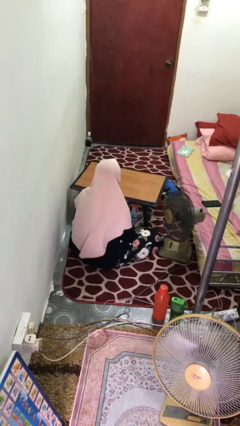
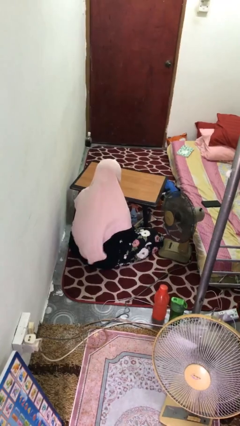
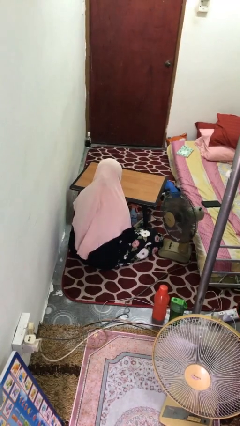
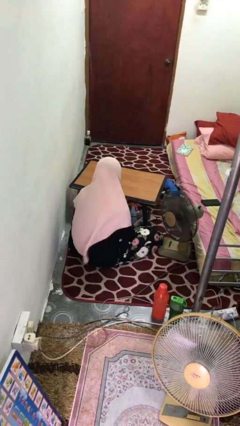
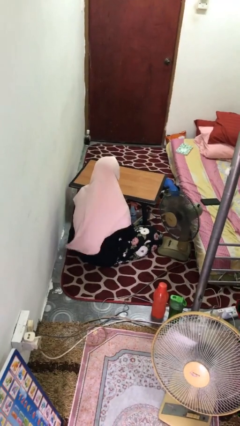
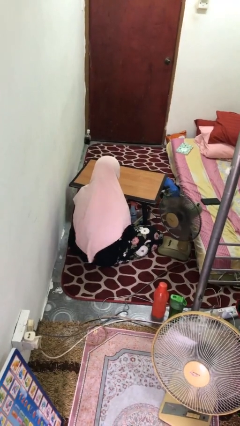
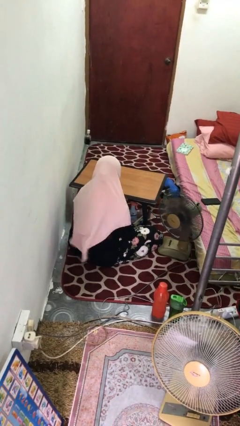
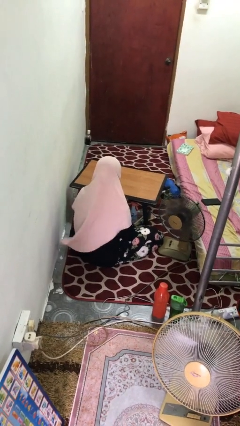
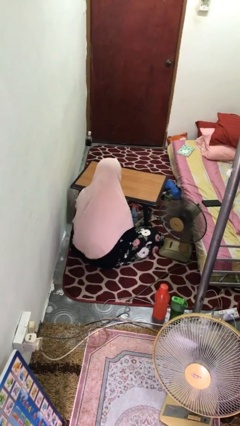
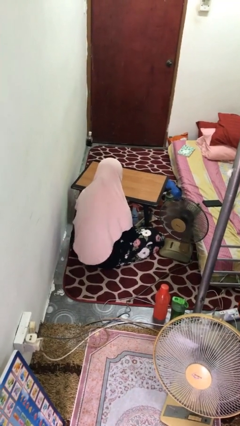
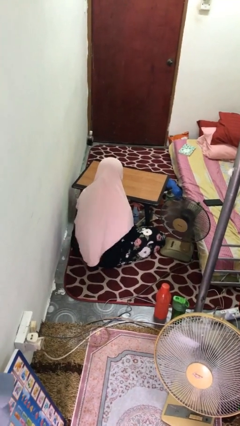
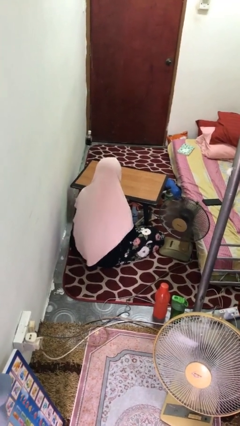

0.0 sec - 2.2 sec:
person nods head

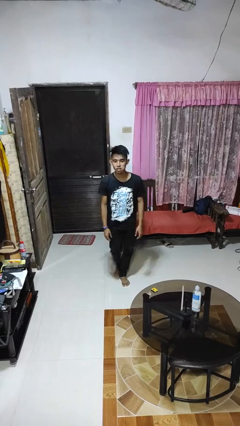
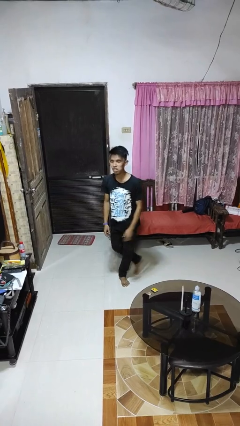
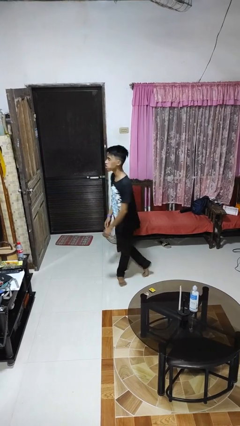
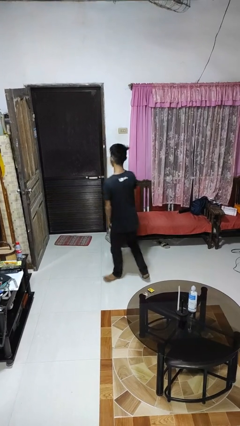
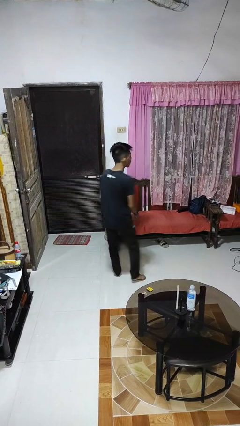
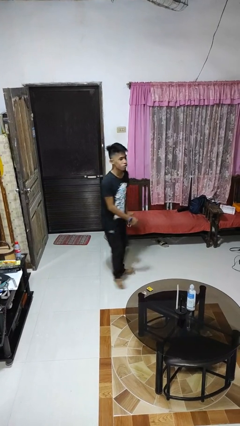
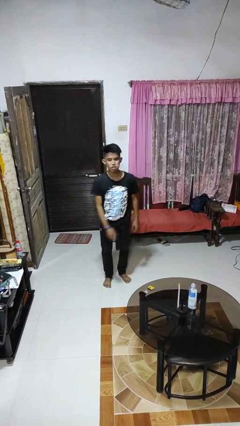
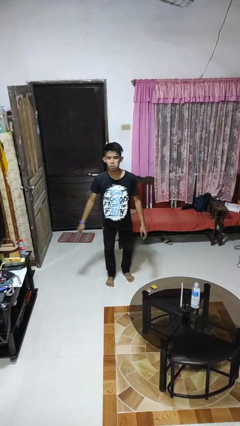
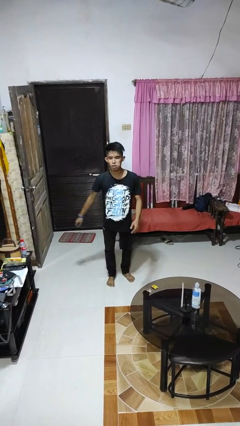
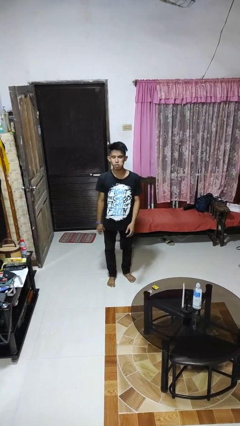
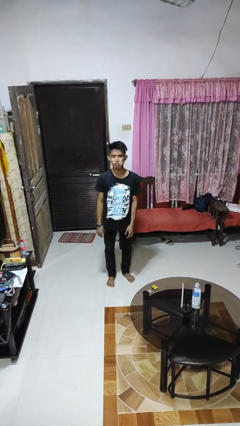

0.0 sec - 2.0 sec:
person twirls

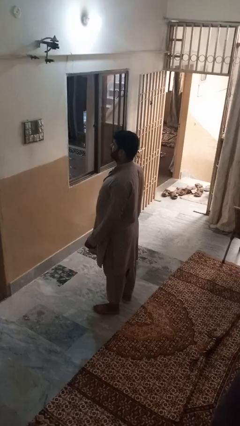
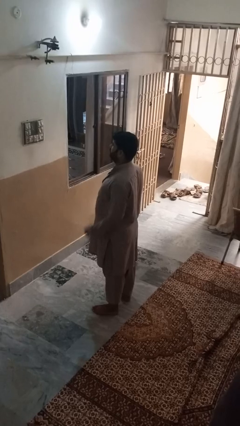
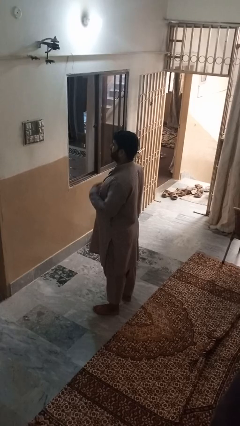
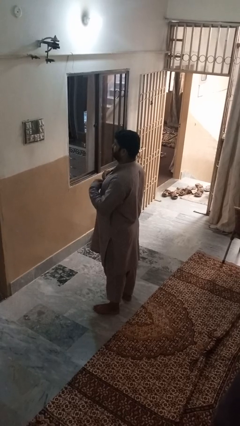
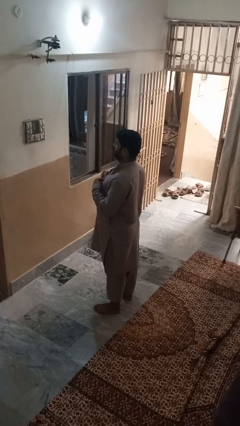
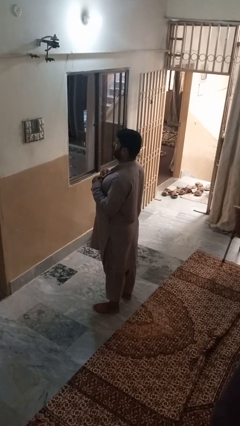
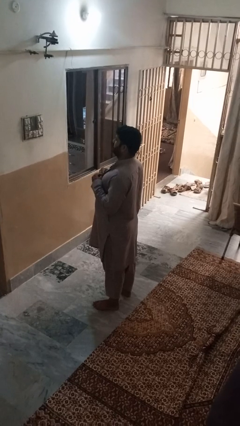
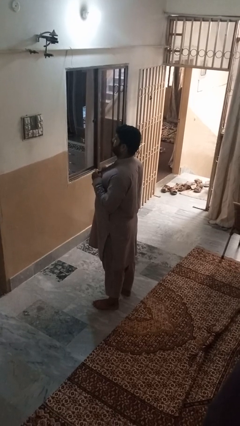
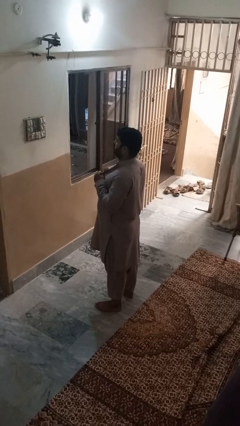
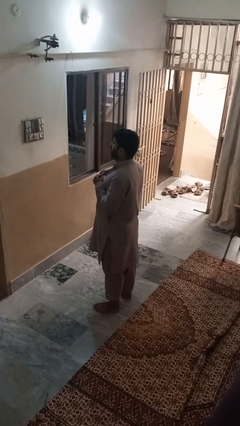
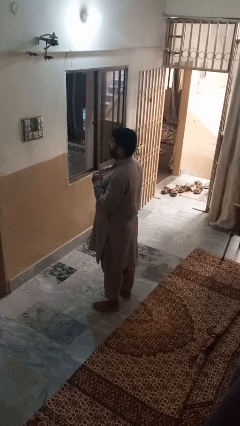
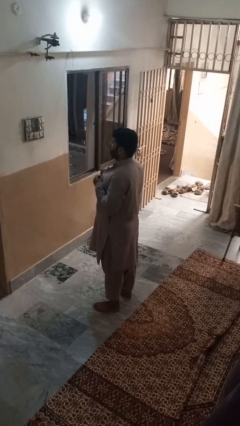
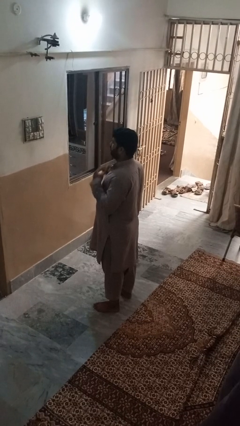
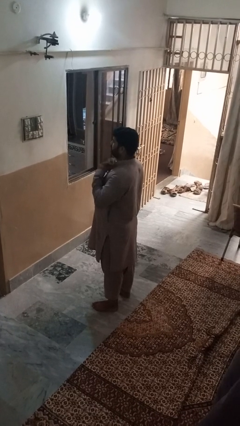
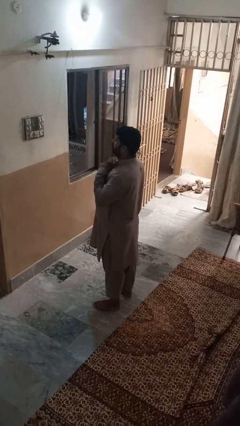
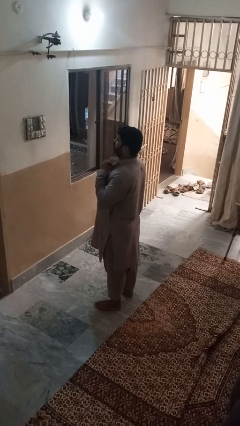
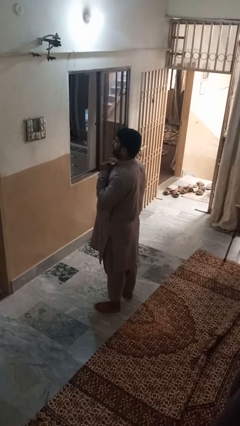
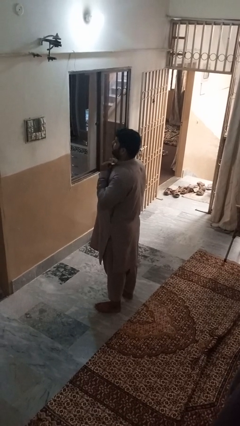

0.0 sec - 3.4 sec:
person buttons shirt

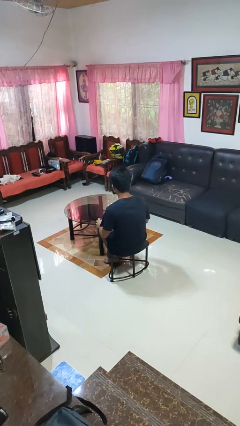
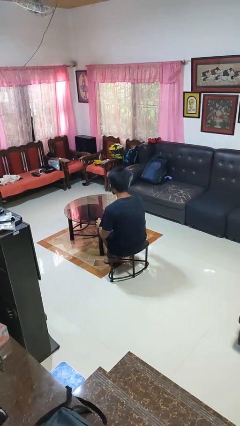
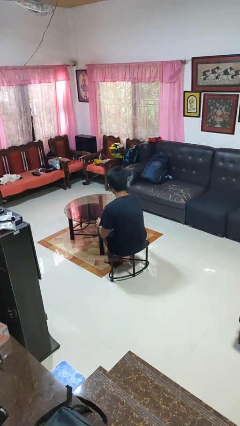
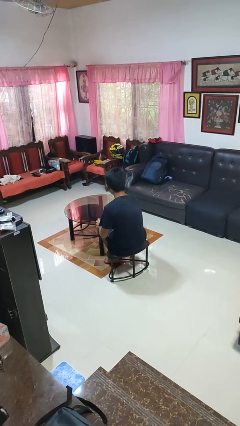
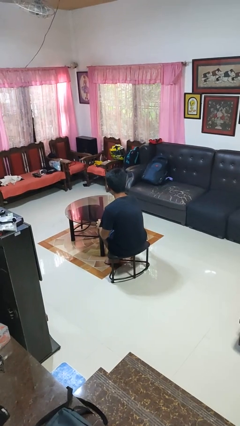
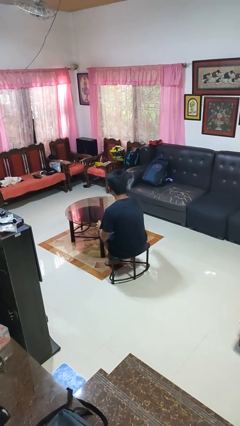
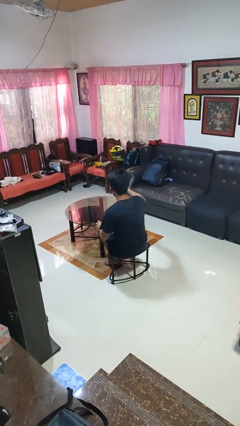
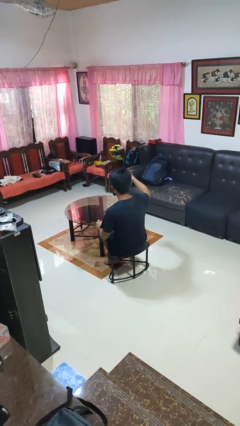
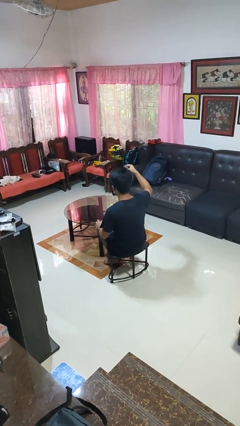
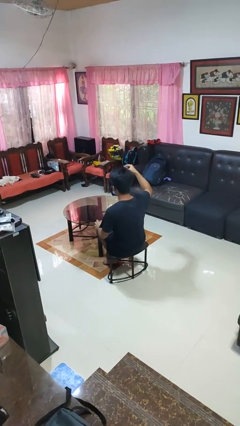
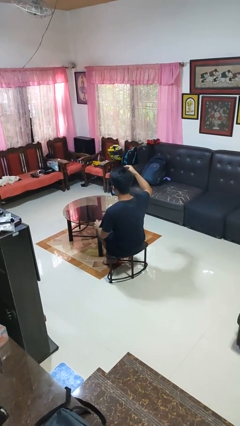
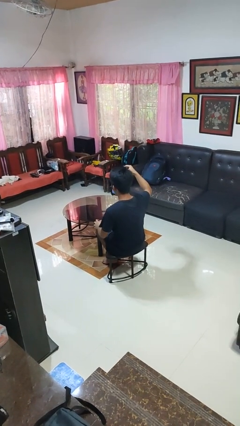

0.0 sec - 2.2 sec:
person picks up object from table

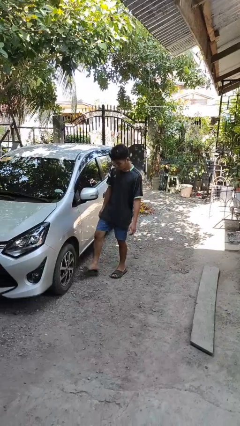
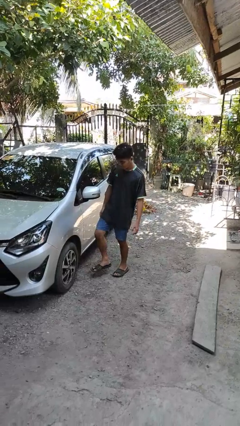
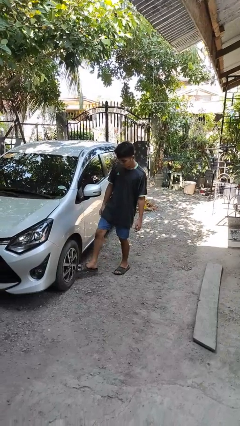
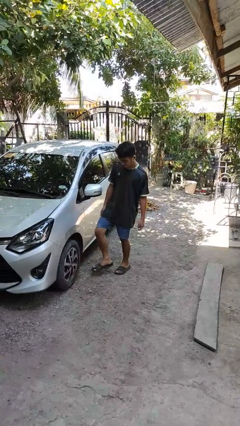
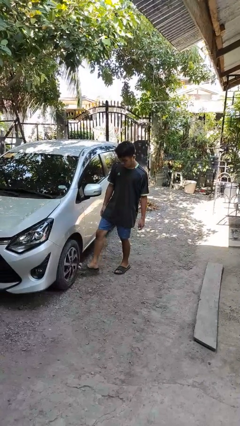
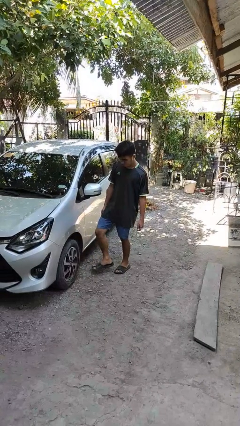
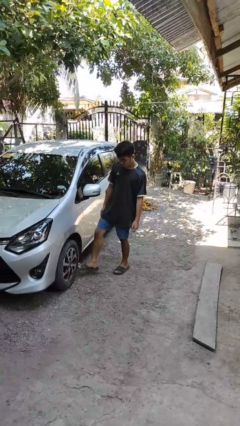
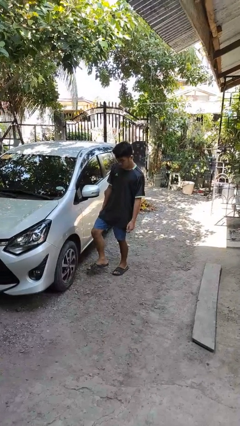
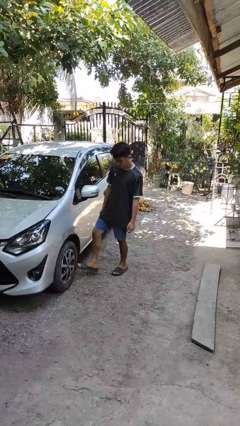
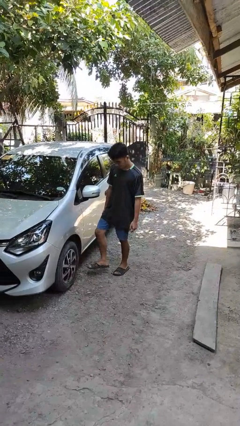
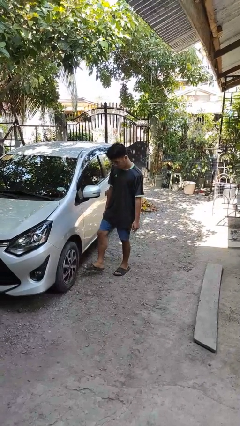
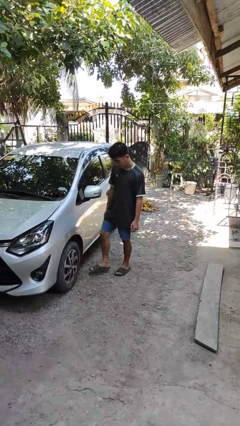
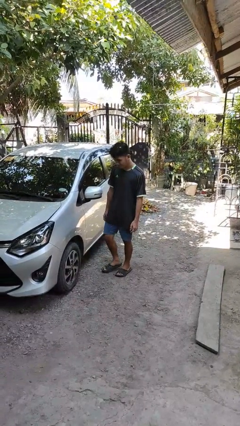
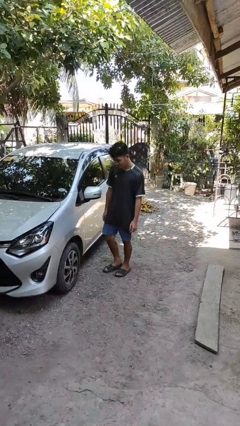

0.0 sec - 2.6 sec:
person kicks car tires

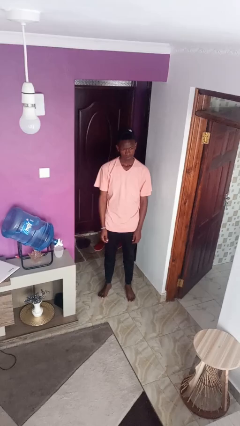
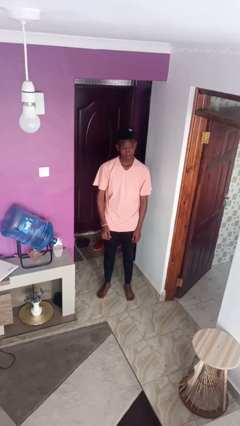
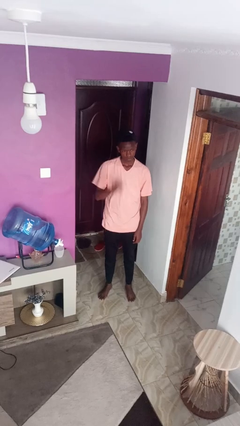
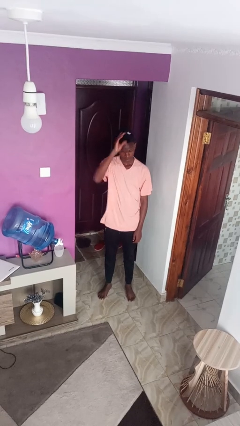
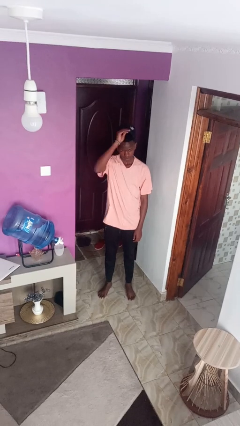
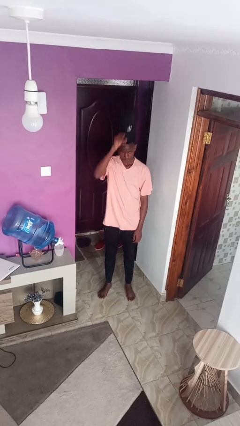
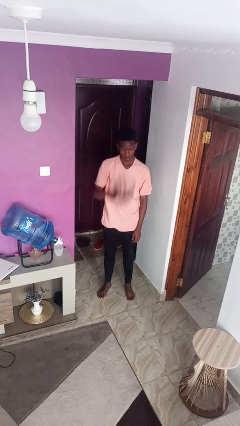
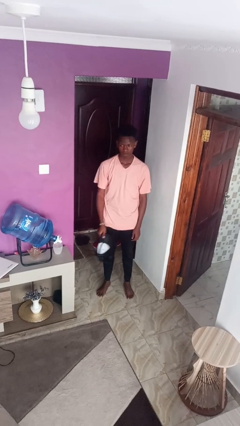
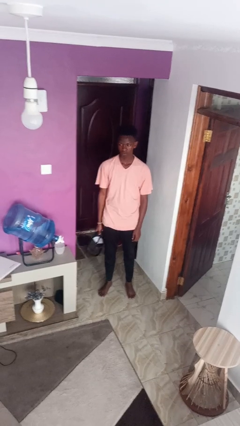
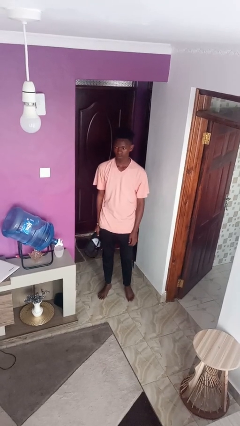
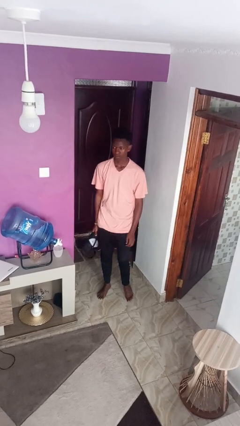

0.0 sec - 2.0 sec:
person takes off hat

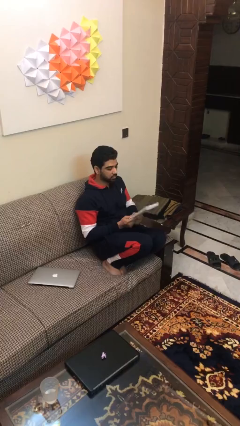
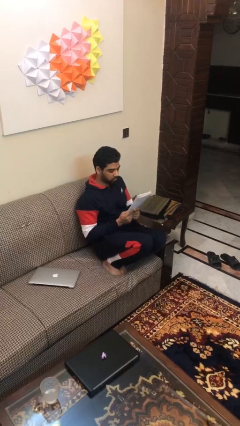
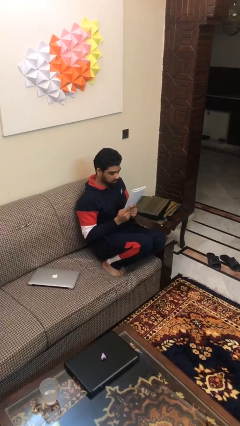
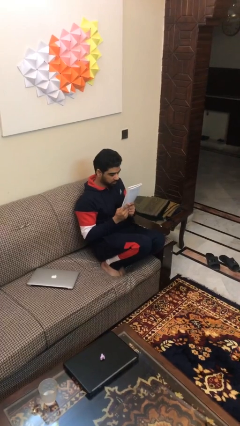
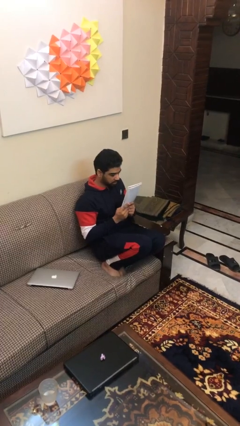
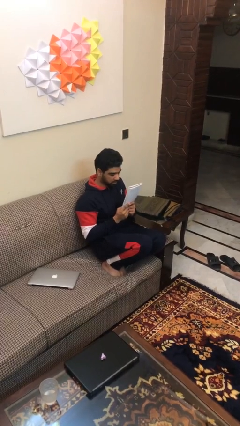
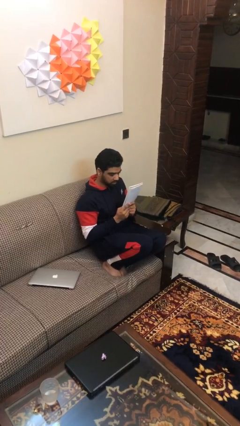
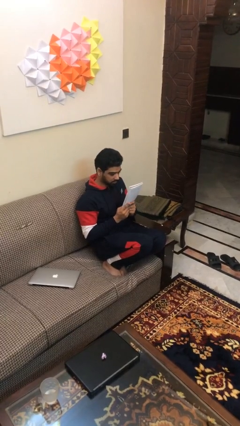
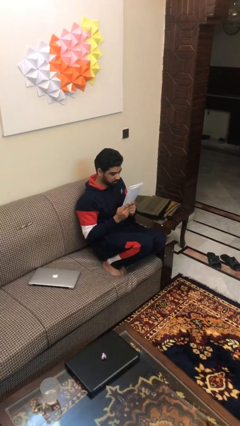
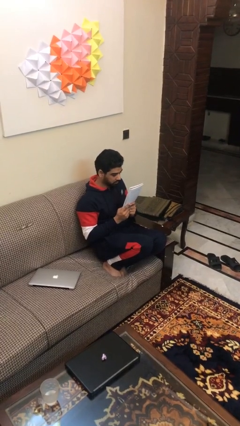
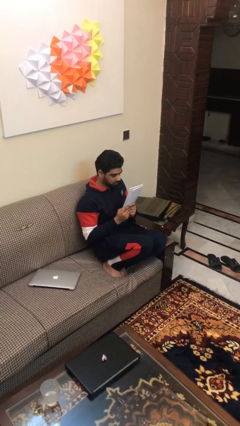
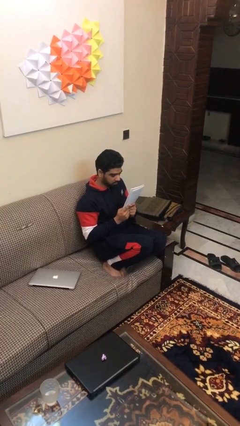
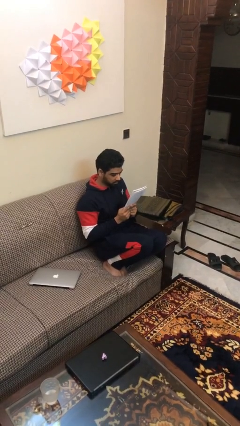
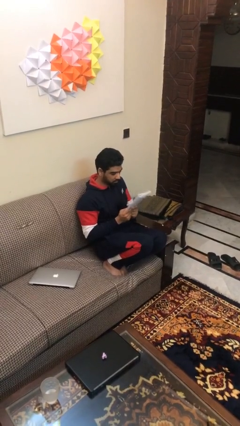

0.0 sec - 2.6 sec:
person reads document
